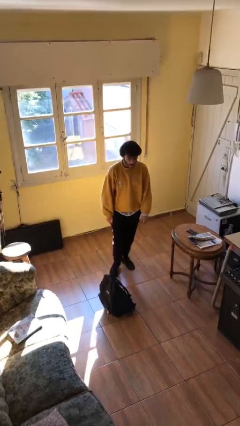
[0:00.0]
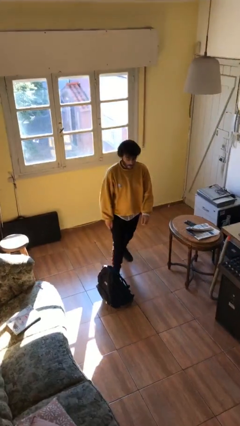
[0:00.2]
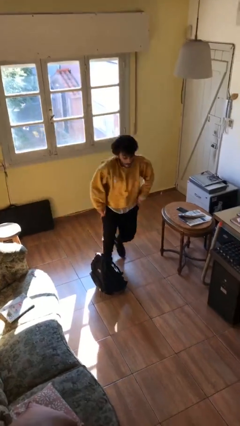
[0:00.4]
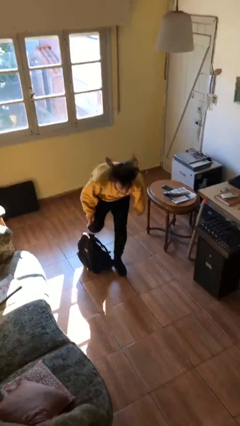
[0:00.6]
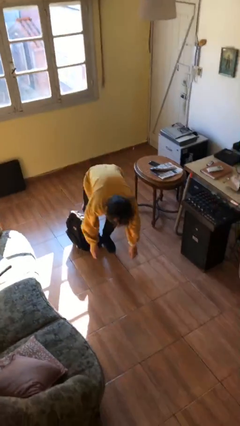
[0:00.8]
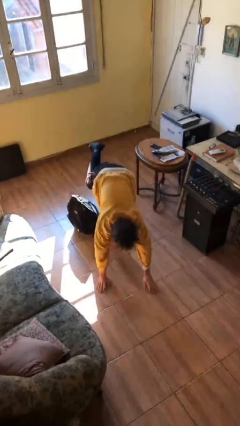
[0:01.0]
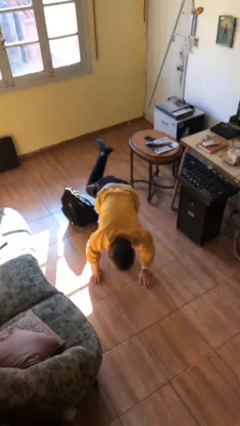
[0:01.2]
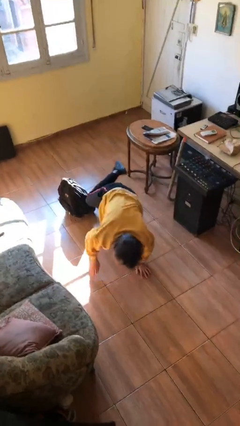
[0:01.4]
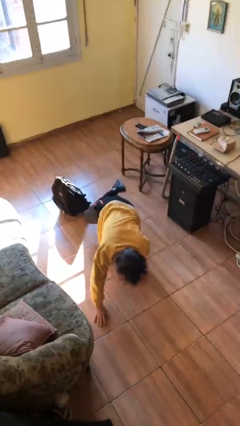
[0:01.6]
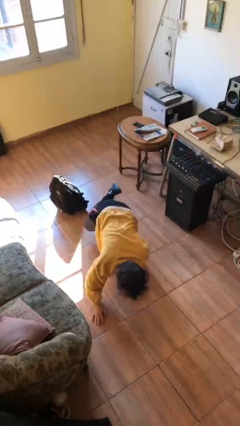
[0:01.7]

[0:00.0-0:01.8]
person trips on object on floor

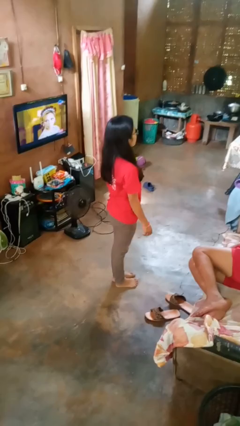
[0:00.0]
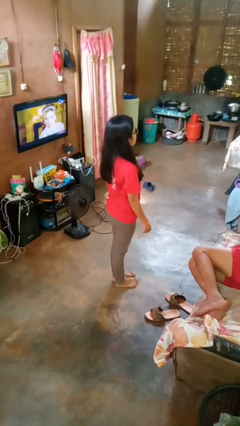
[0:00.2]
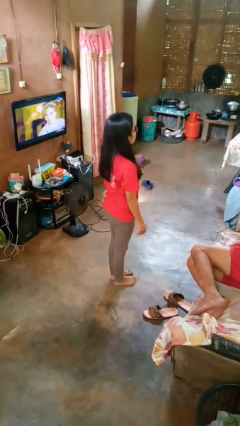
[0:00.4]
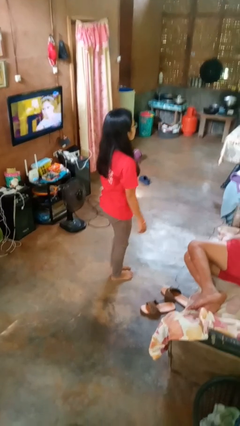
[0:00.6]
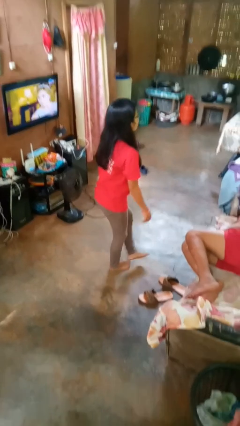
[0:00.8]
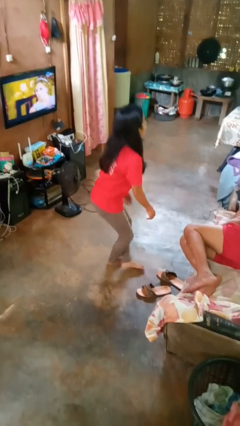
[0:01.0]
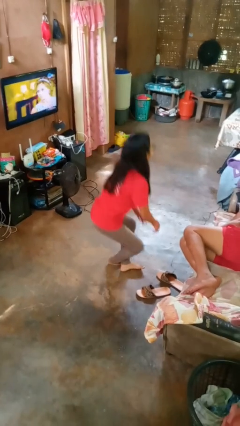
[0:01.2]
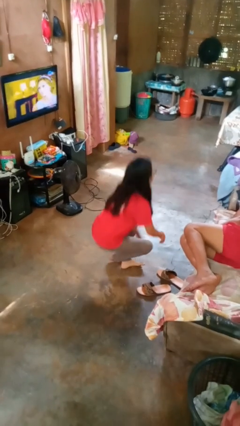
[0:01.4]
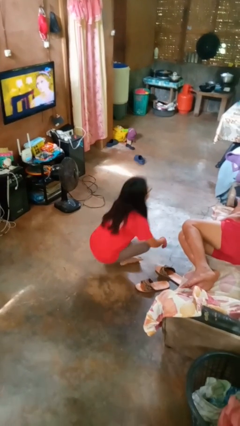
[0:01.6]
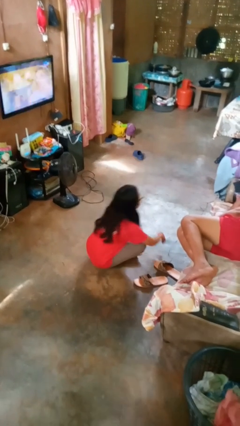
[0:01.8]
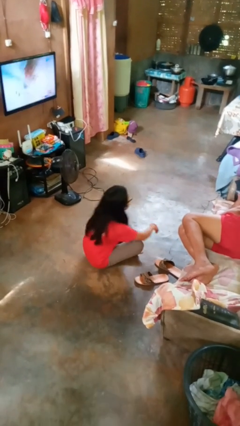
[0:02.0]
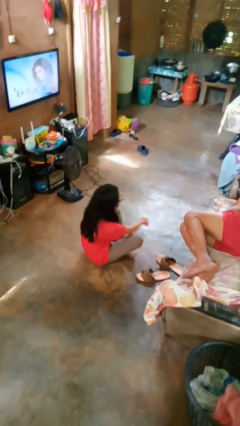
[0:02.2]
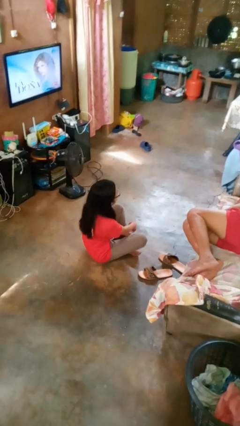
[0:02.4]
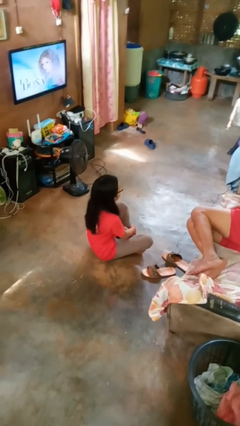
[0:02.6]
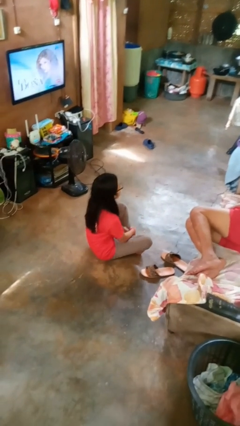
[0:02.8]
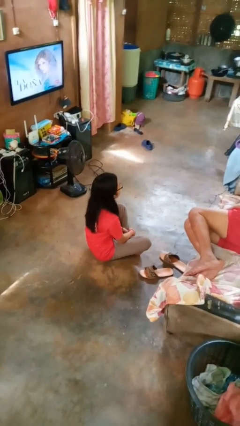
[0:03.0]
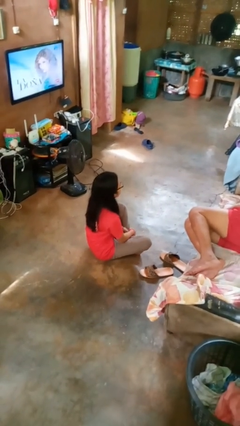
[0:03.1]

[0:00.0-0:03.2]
person sits crisscross

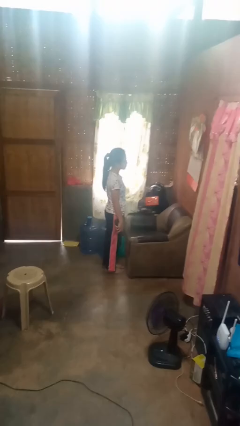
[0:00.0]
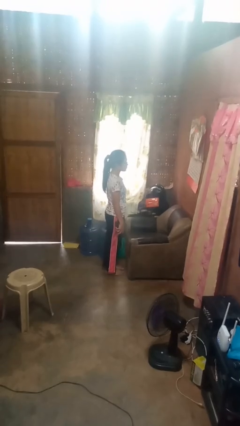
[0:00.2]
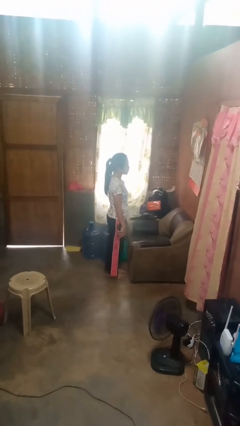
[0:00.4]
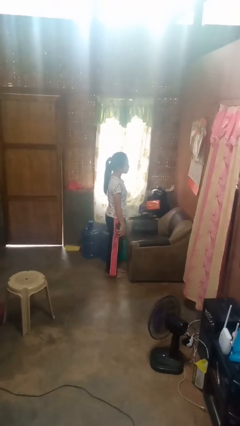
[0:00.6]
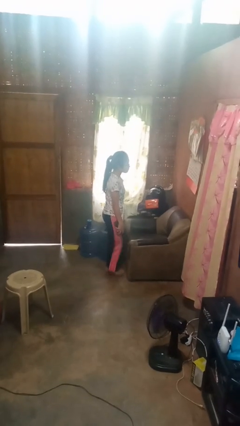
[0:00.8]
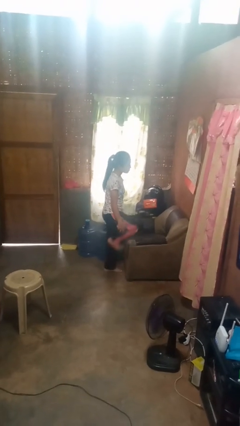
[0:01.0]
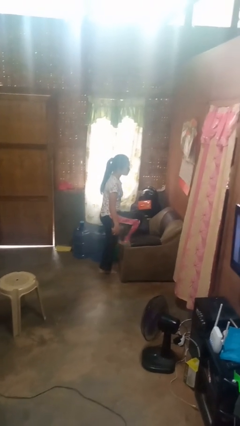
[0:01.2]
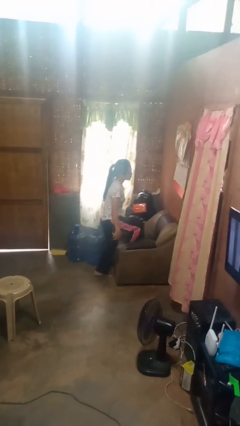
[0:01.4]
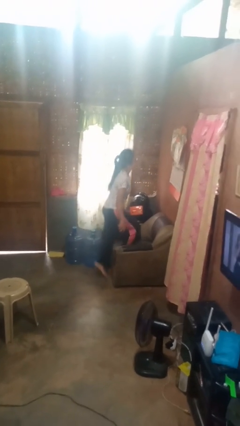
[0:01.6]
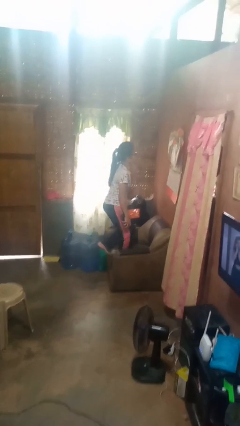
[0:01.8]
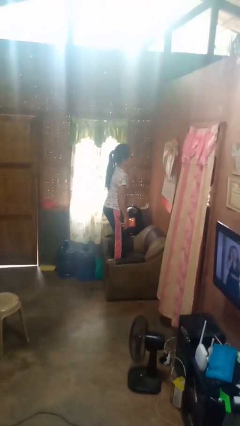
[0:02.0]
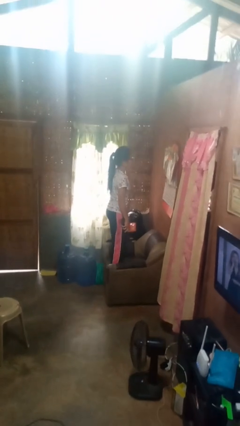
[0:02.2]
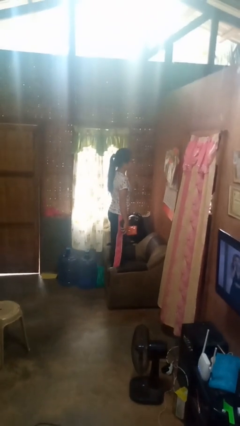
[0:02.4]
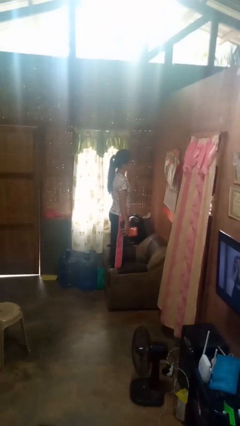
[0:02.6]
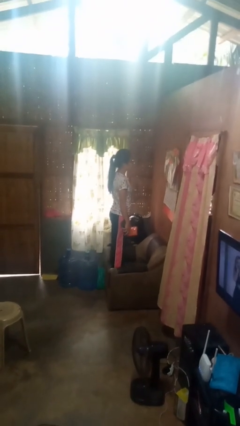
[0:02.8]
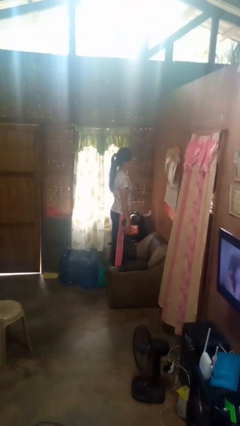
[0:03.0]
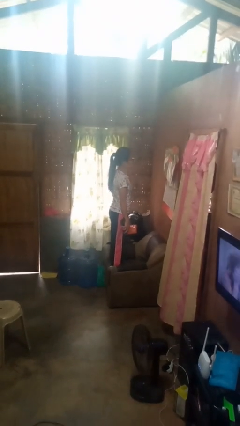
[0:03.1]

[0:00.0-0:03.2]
person climbs on couch

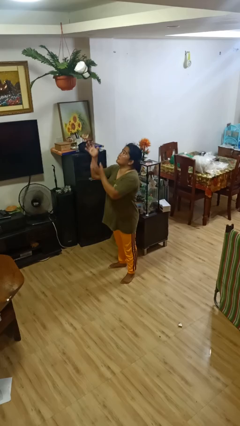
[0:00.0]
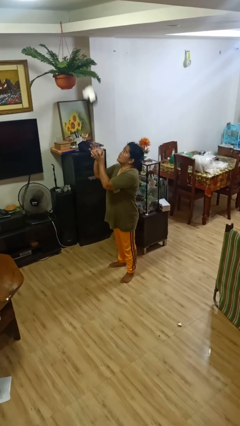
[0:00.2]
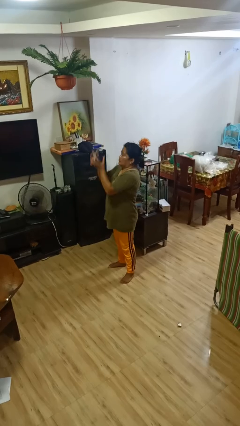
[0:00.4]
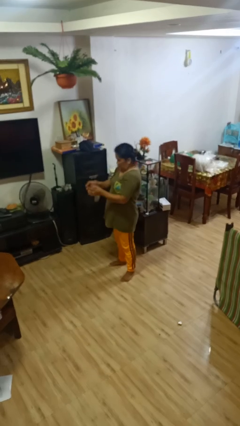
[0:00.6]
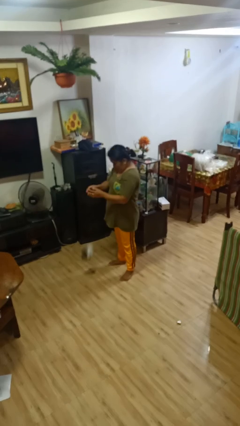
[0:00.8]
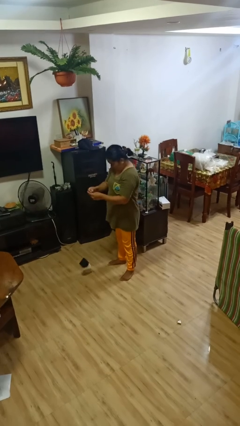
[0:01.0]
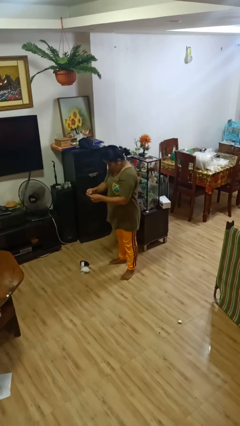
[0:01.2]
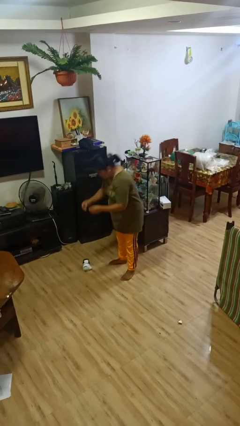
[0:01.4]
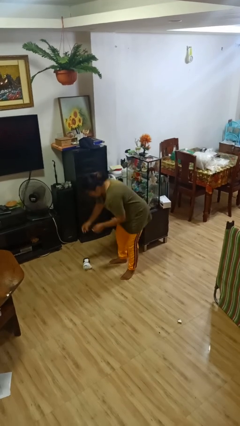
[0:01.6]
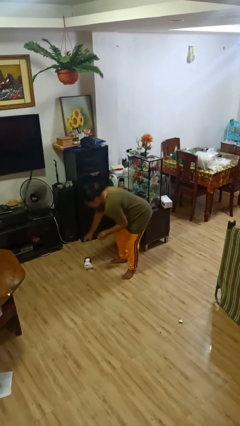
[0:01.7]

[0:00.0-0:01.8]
person catches dropped object

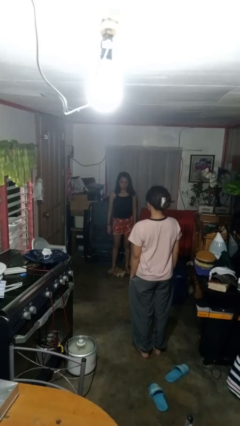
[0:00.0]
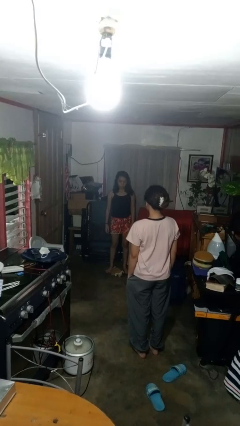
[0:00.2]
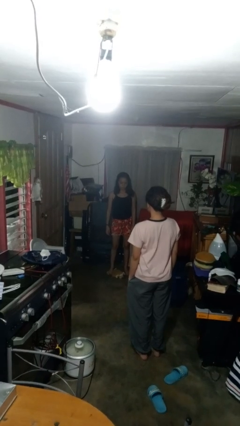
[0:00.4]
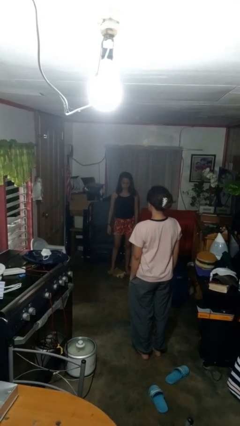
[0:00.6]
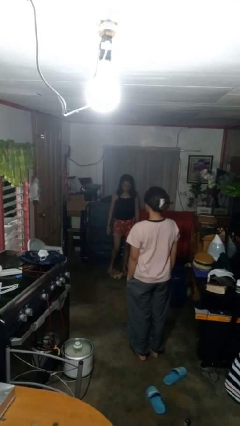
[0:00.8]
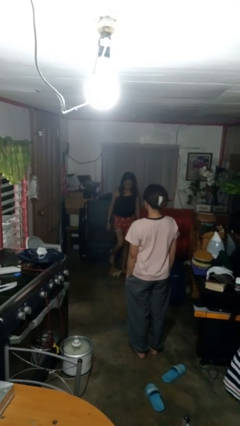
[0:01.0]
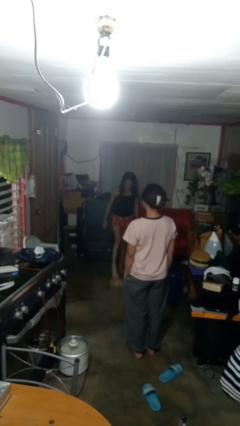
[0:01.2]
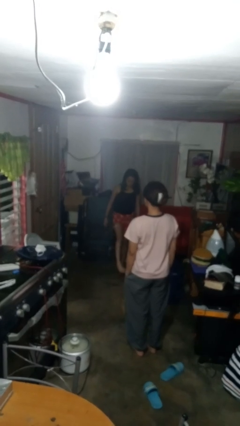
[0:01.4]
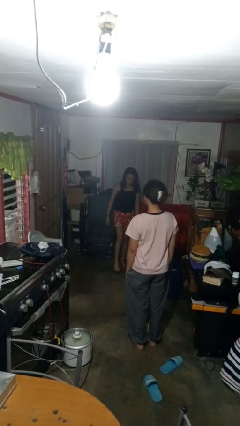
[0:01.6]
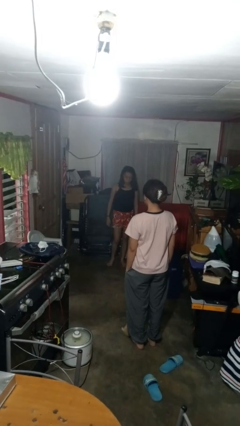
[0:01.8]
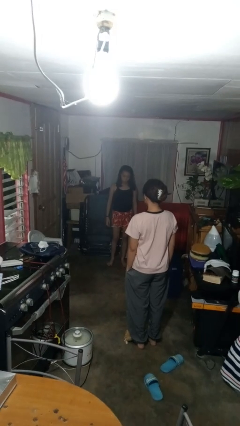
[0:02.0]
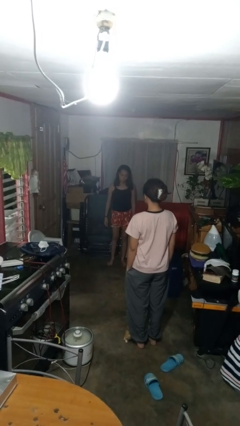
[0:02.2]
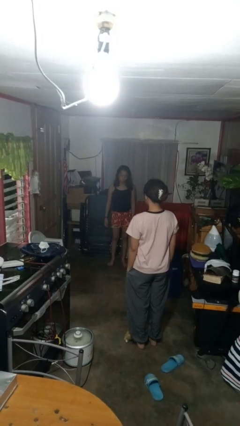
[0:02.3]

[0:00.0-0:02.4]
person kicks object to person

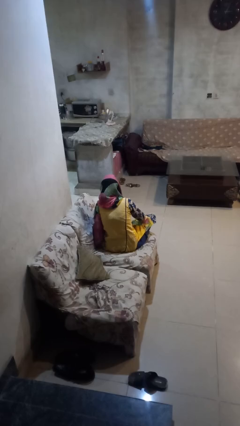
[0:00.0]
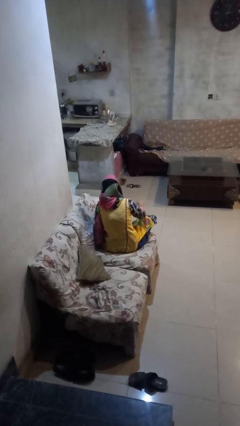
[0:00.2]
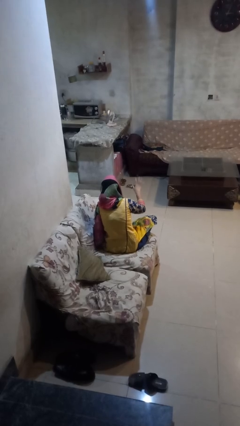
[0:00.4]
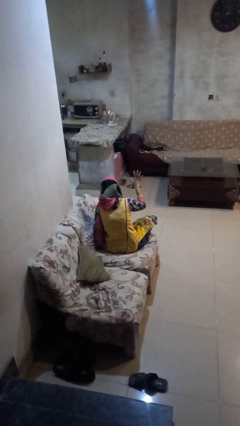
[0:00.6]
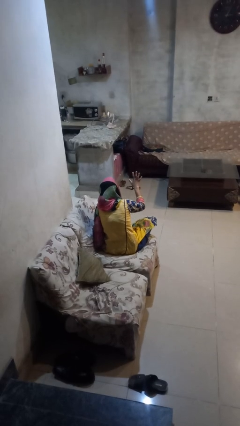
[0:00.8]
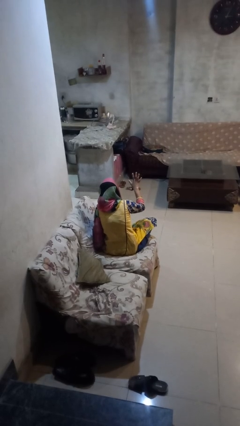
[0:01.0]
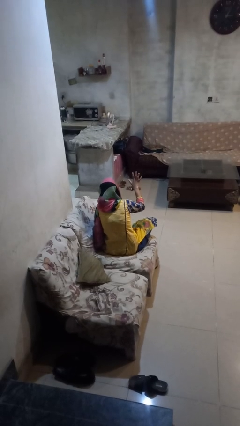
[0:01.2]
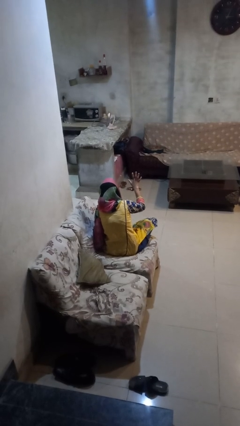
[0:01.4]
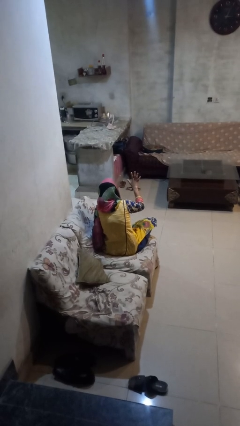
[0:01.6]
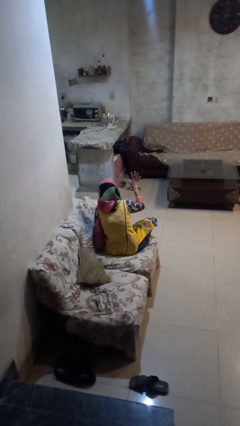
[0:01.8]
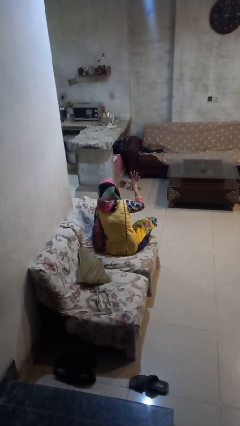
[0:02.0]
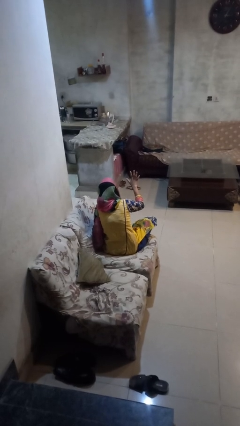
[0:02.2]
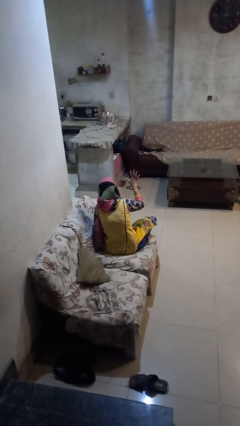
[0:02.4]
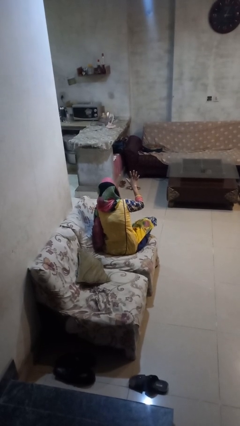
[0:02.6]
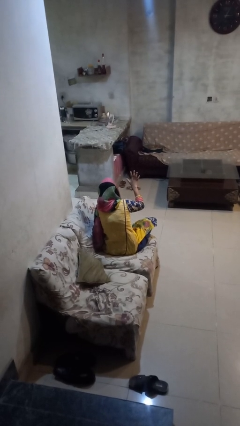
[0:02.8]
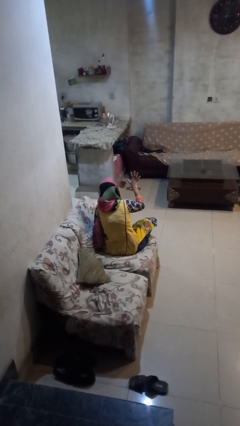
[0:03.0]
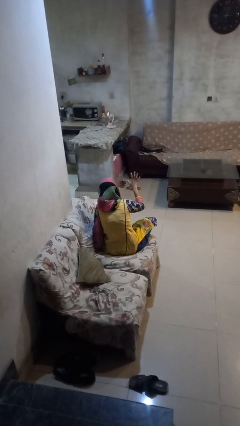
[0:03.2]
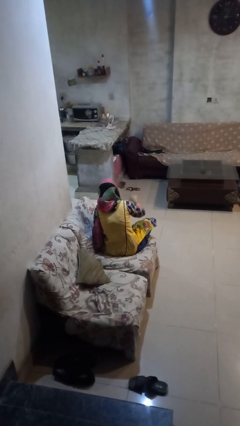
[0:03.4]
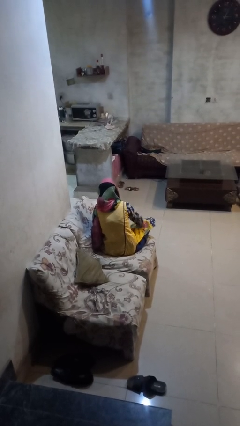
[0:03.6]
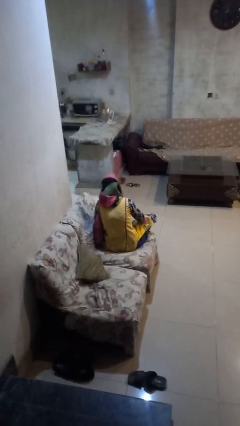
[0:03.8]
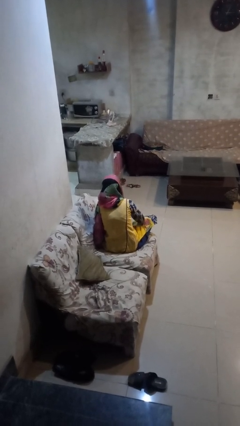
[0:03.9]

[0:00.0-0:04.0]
person gestures number five

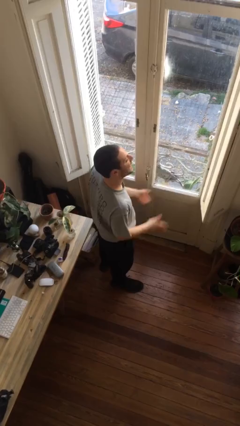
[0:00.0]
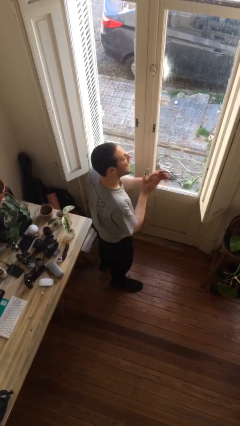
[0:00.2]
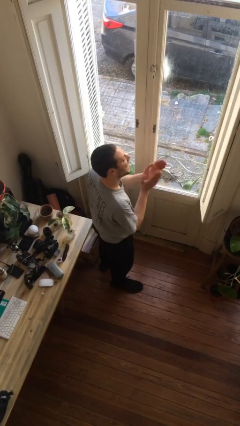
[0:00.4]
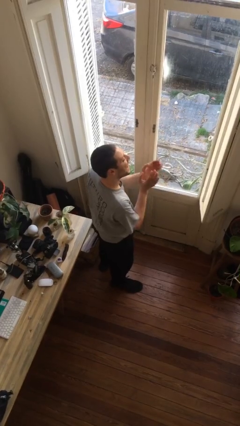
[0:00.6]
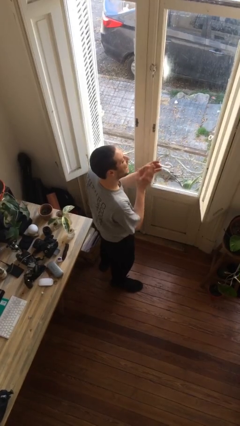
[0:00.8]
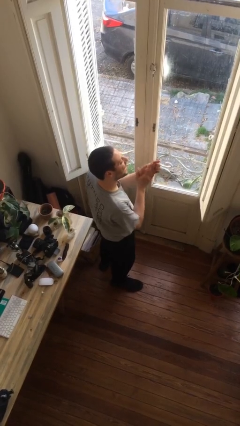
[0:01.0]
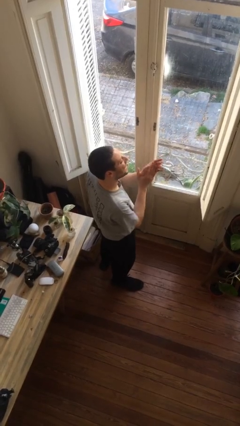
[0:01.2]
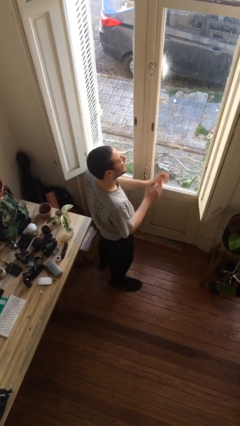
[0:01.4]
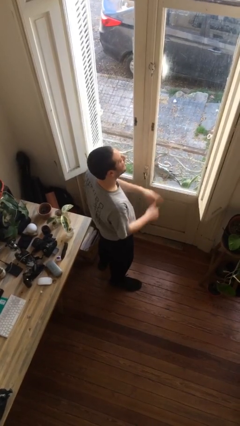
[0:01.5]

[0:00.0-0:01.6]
person claps hands
